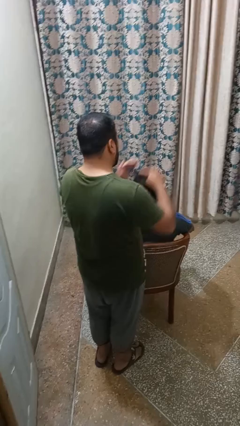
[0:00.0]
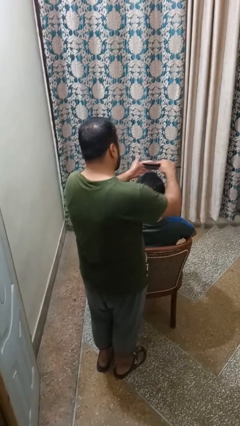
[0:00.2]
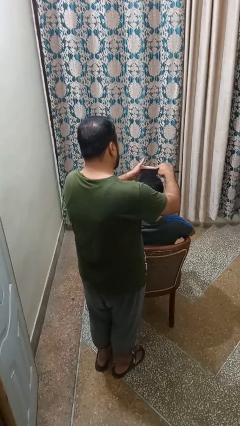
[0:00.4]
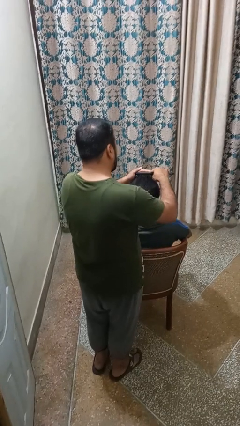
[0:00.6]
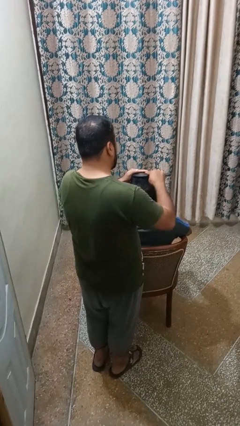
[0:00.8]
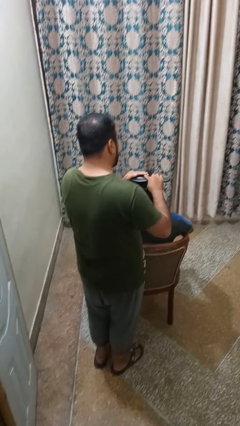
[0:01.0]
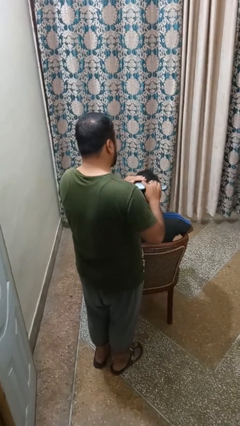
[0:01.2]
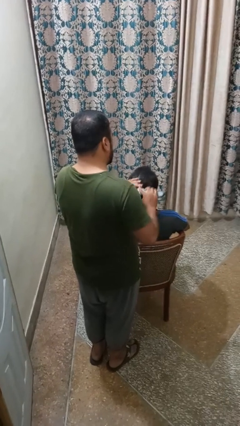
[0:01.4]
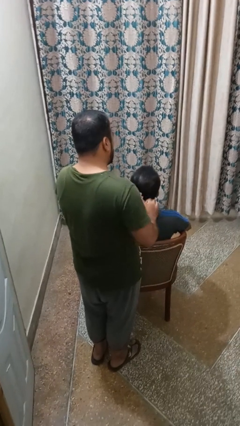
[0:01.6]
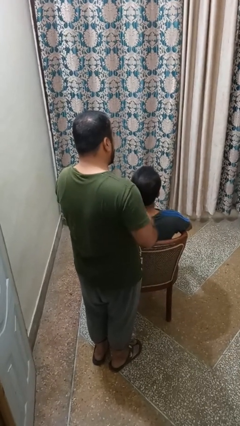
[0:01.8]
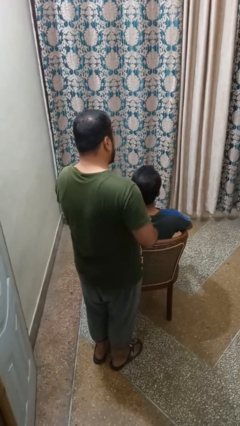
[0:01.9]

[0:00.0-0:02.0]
person brushes hair of person

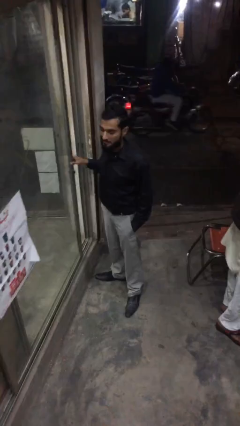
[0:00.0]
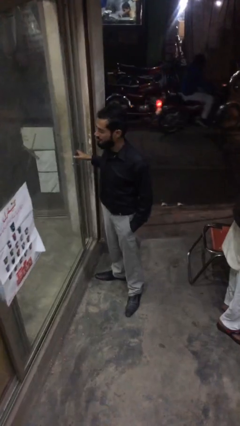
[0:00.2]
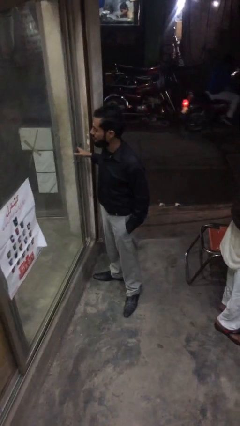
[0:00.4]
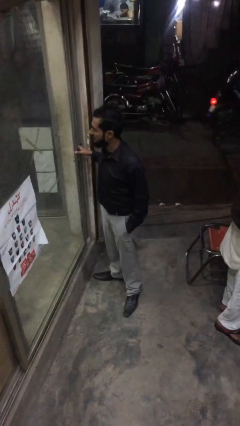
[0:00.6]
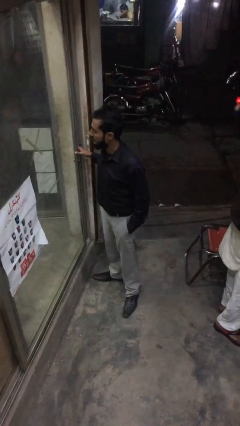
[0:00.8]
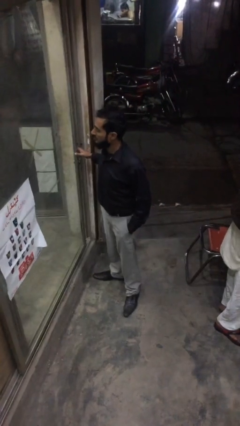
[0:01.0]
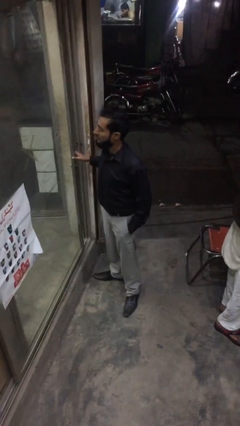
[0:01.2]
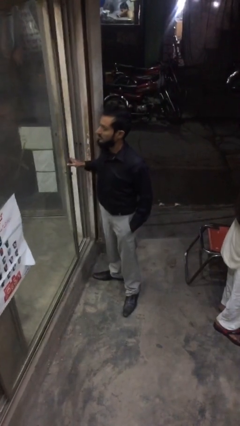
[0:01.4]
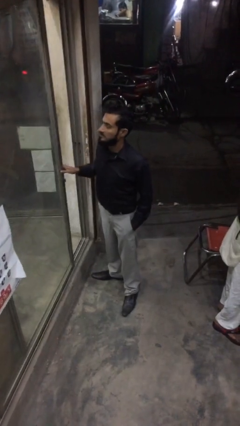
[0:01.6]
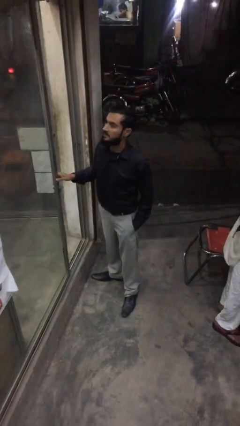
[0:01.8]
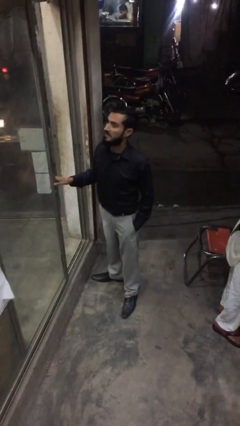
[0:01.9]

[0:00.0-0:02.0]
person opens facility door

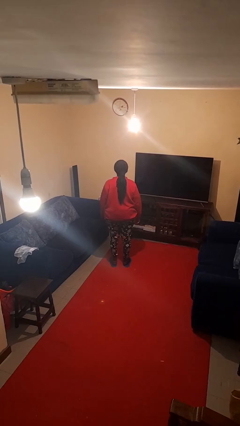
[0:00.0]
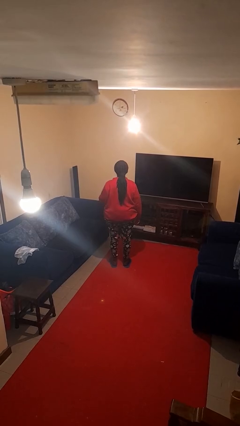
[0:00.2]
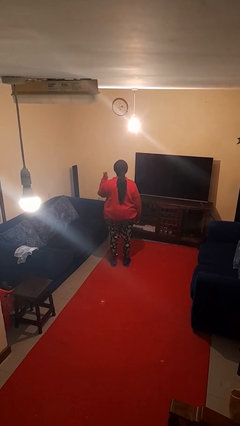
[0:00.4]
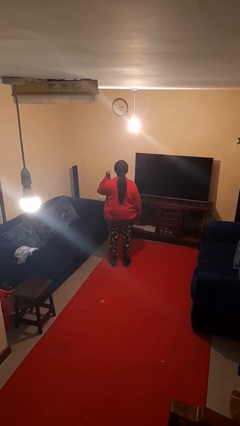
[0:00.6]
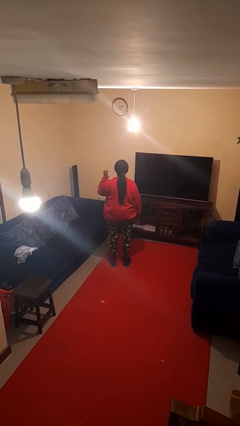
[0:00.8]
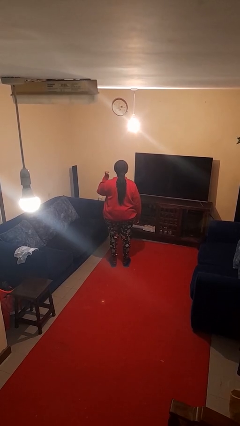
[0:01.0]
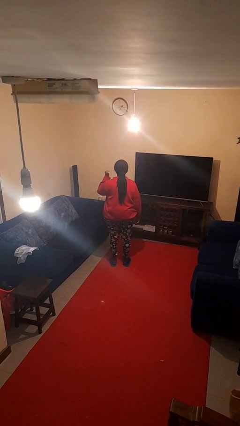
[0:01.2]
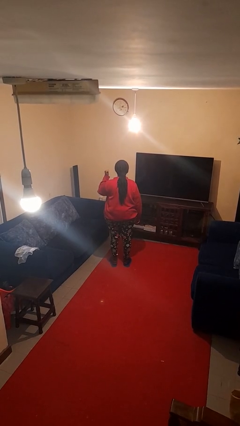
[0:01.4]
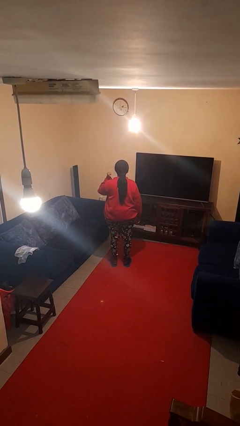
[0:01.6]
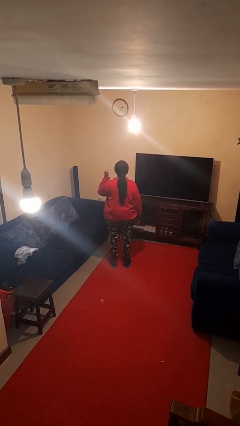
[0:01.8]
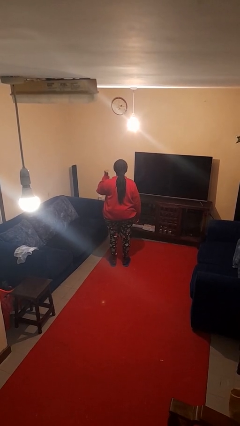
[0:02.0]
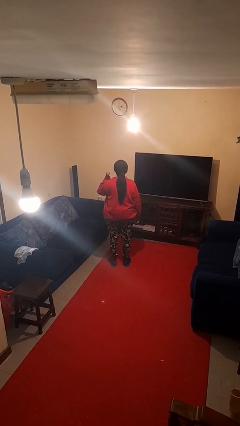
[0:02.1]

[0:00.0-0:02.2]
person gestures behind me

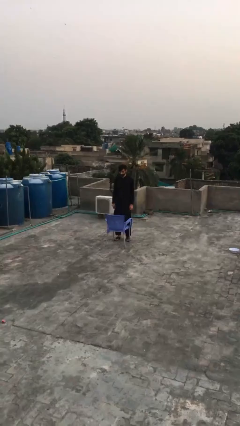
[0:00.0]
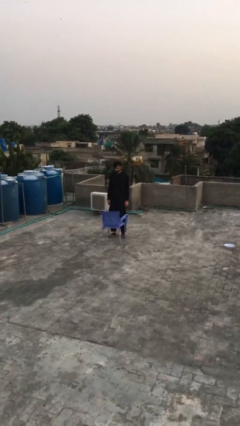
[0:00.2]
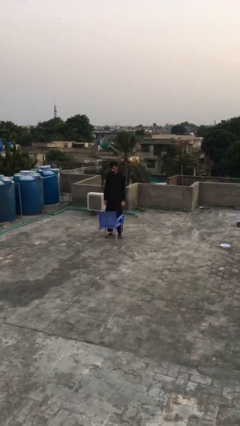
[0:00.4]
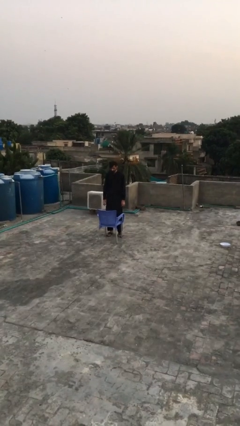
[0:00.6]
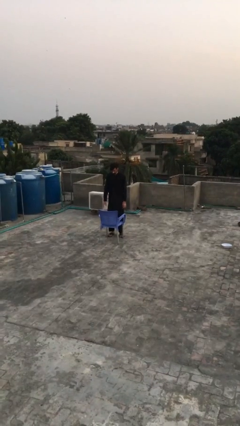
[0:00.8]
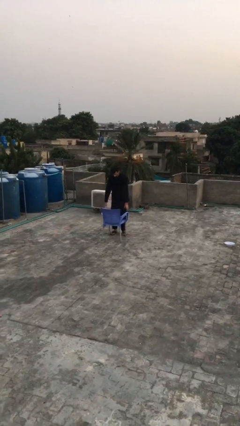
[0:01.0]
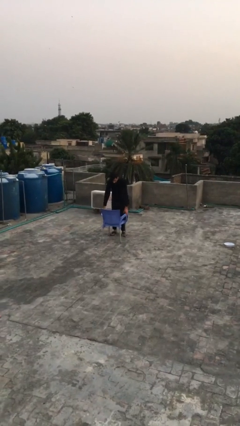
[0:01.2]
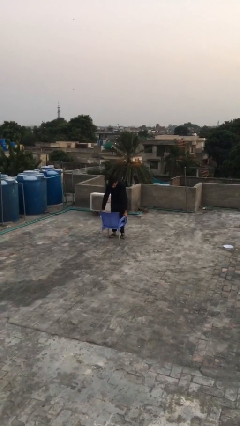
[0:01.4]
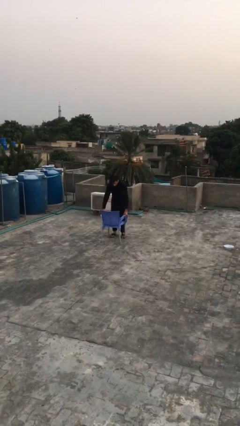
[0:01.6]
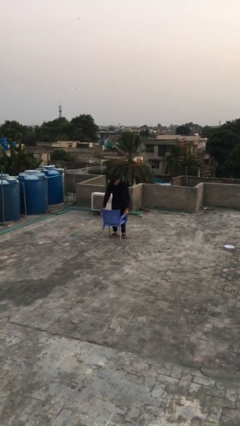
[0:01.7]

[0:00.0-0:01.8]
person picks up object from floor

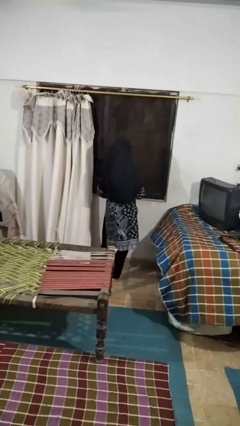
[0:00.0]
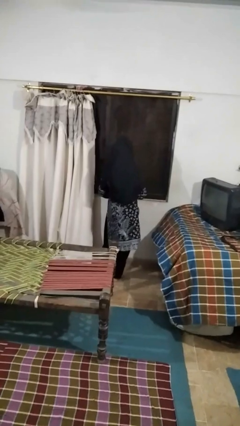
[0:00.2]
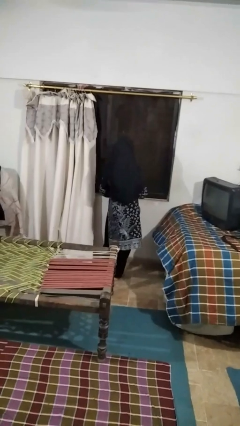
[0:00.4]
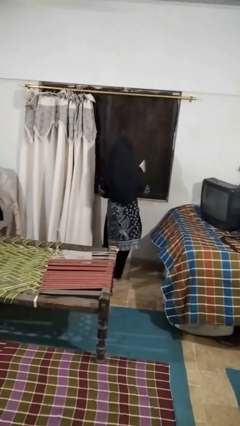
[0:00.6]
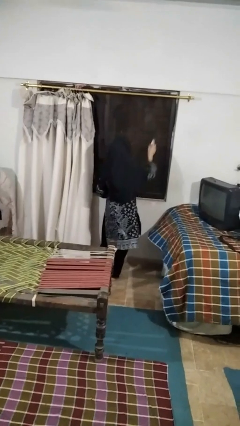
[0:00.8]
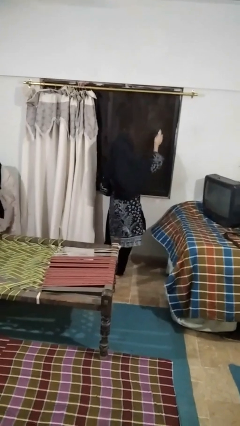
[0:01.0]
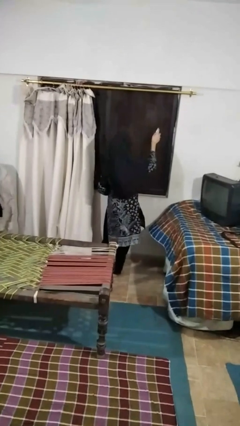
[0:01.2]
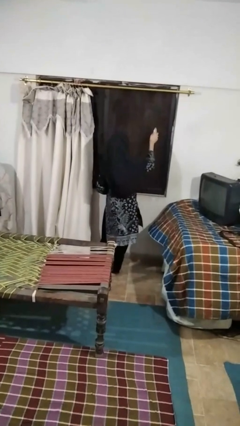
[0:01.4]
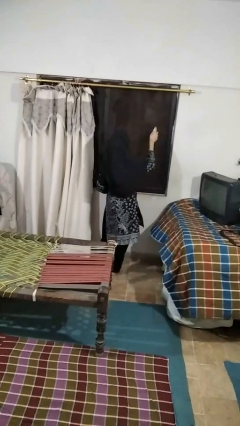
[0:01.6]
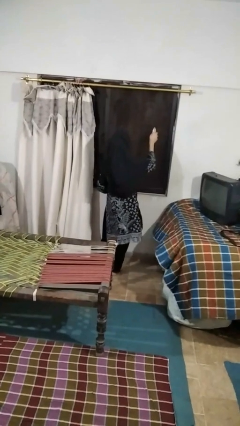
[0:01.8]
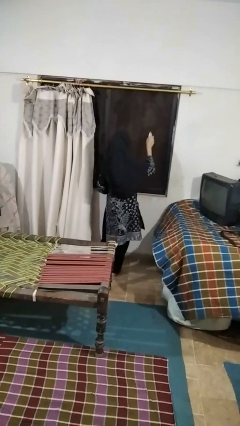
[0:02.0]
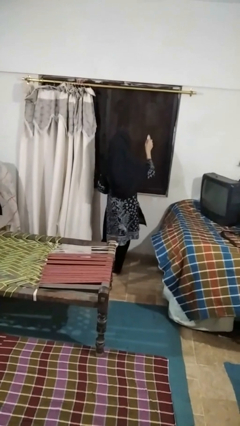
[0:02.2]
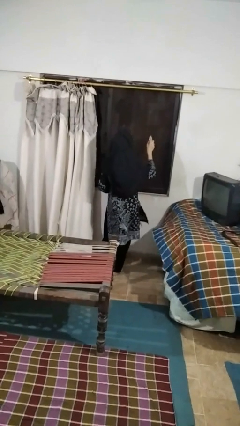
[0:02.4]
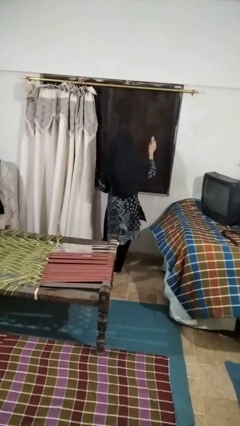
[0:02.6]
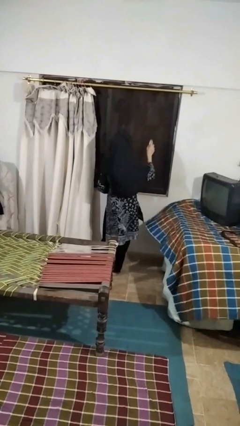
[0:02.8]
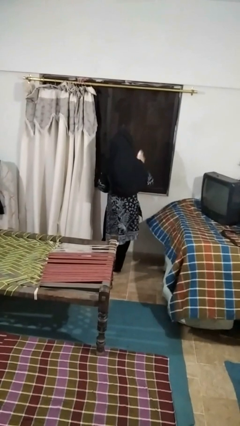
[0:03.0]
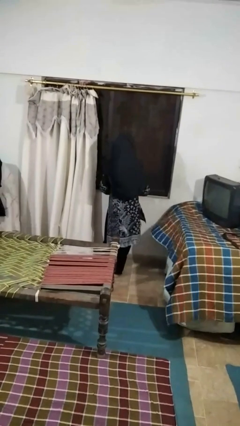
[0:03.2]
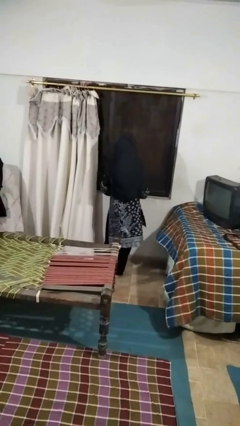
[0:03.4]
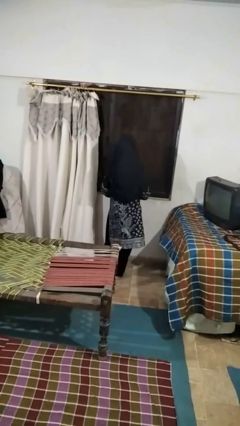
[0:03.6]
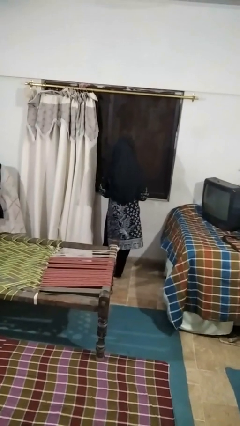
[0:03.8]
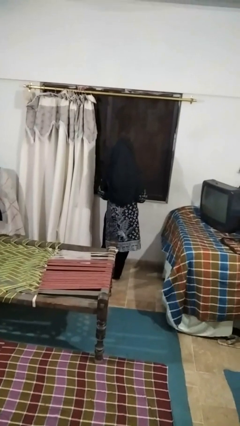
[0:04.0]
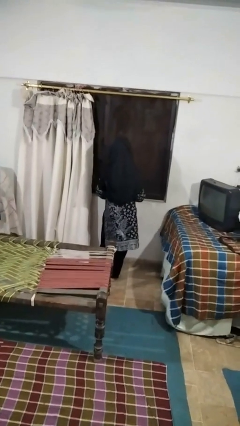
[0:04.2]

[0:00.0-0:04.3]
person sprays from bottle

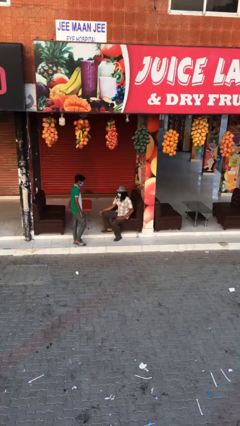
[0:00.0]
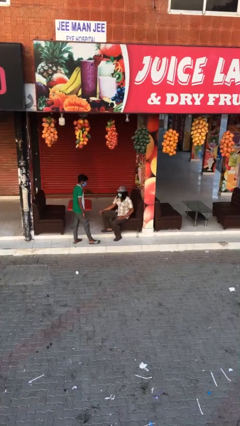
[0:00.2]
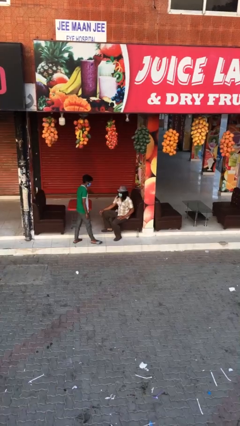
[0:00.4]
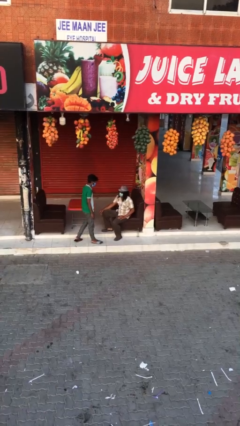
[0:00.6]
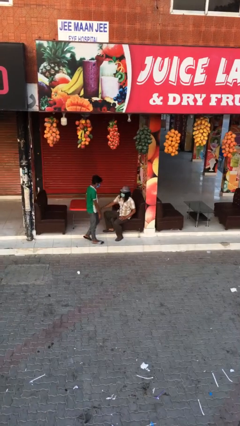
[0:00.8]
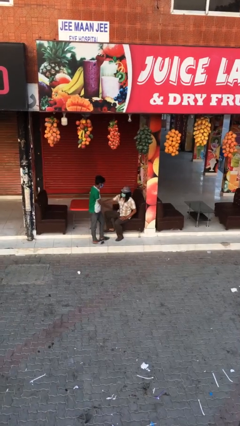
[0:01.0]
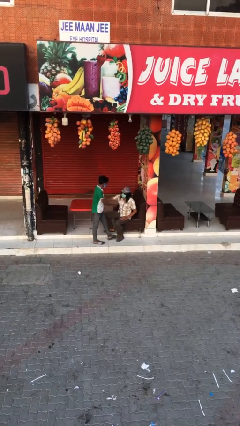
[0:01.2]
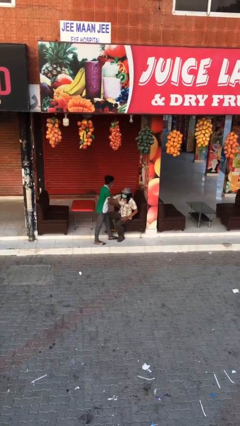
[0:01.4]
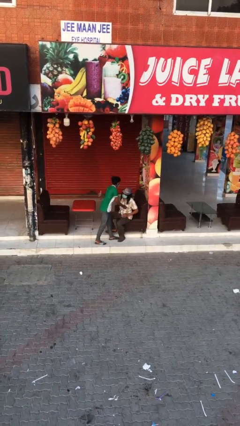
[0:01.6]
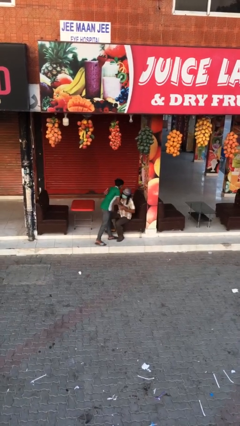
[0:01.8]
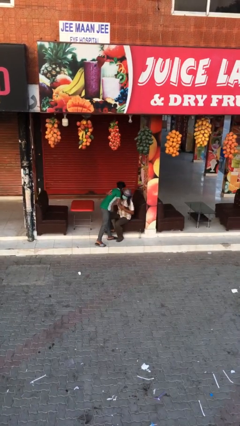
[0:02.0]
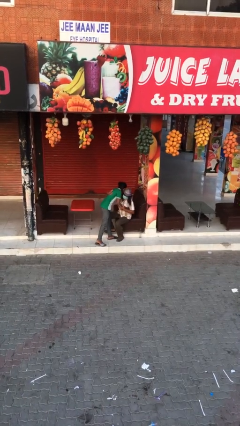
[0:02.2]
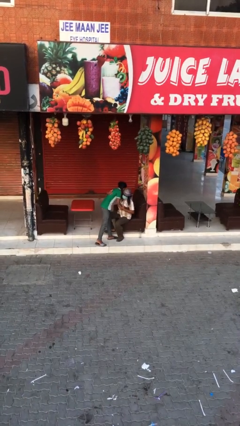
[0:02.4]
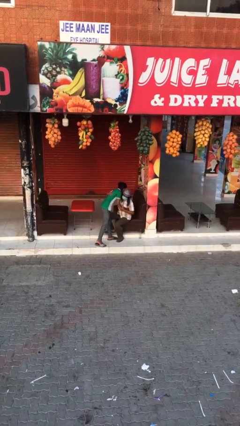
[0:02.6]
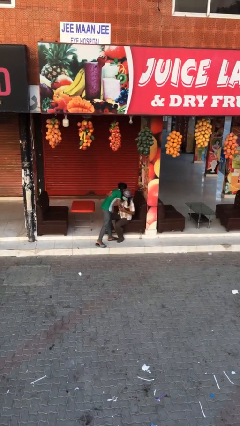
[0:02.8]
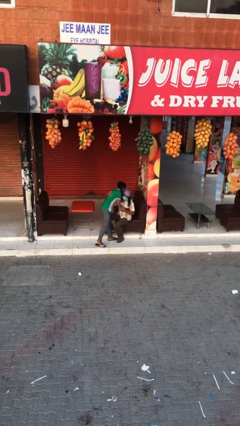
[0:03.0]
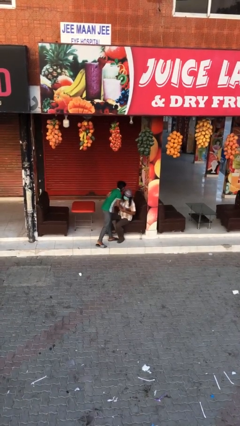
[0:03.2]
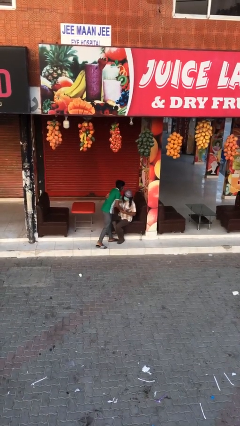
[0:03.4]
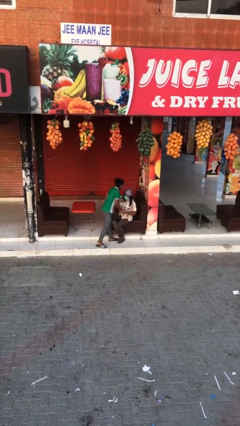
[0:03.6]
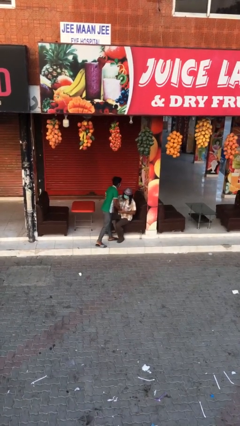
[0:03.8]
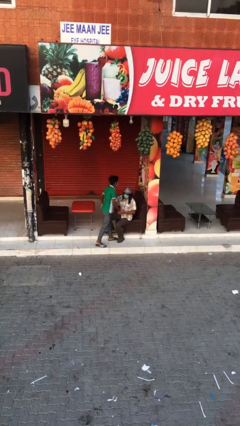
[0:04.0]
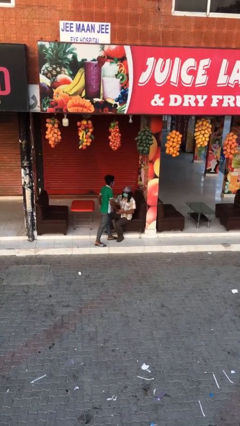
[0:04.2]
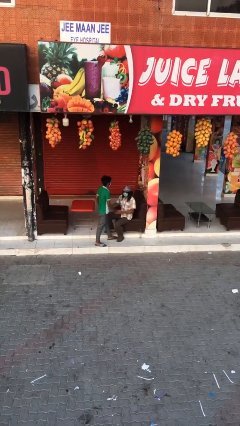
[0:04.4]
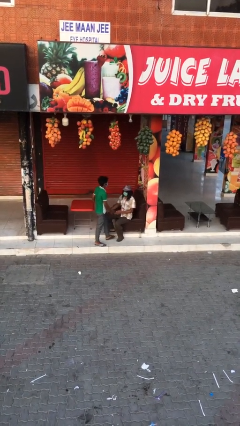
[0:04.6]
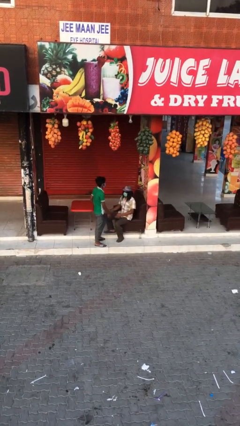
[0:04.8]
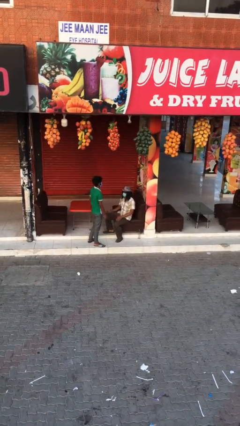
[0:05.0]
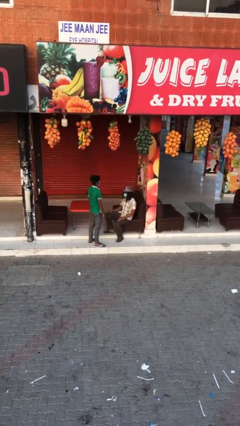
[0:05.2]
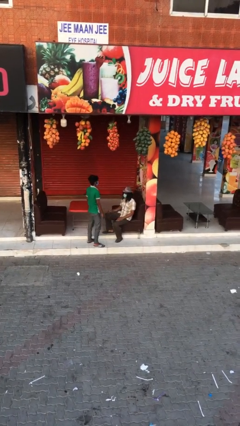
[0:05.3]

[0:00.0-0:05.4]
person embraces person
